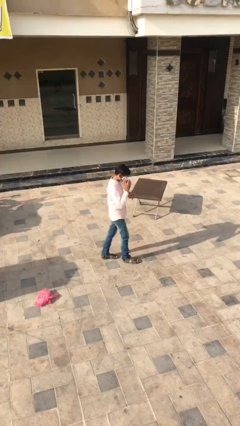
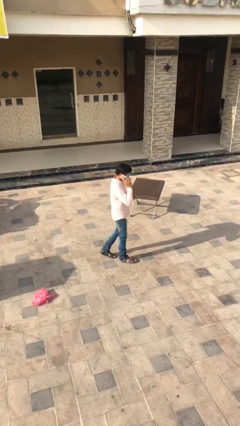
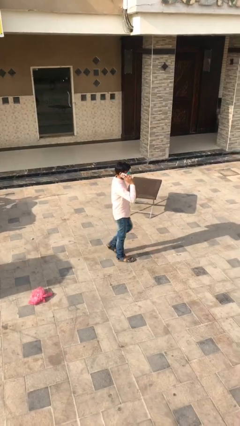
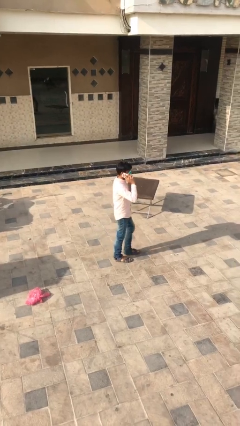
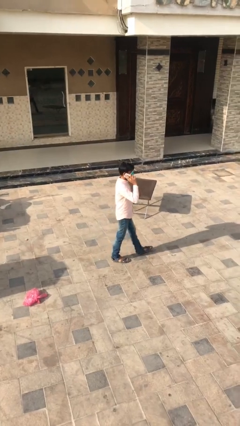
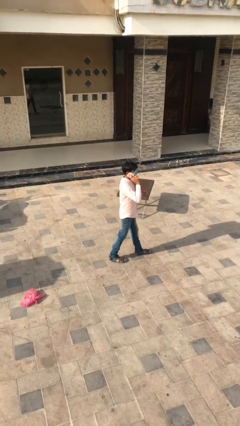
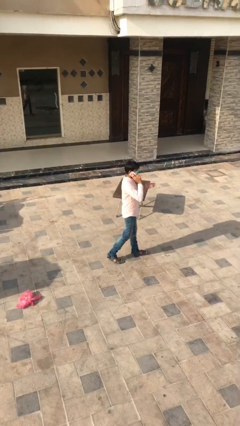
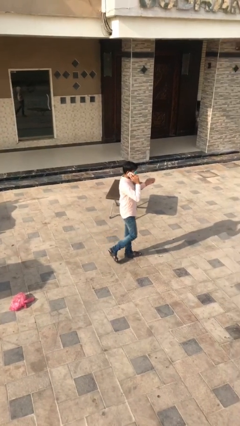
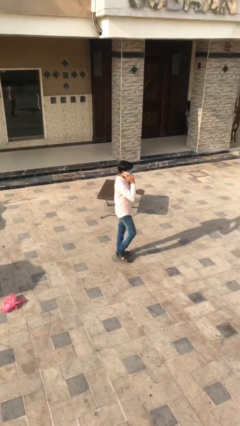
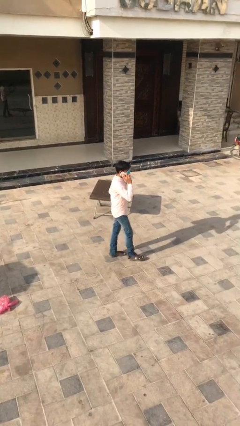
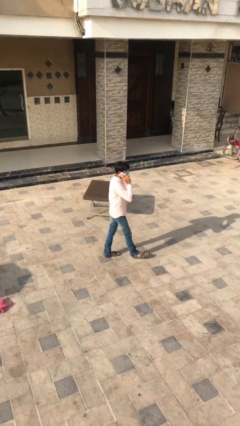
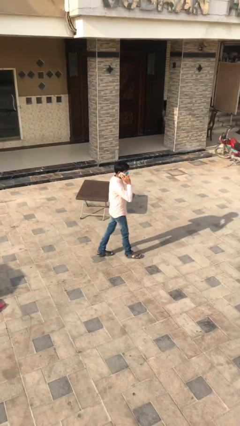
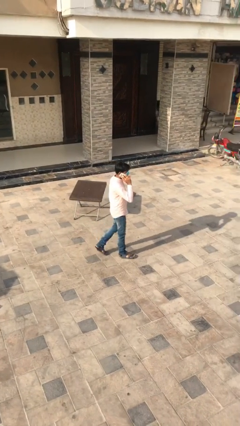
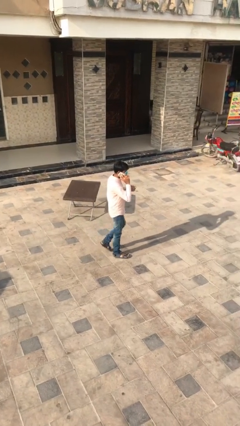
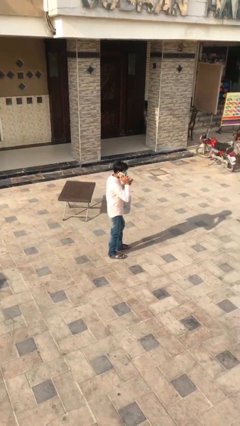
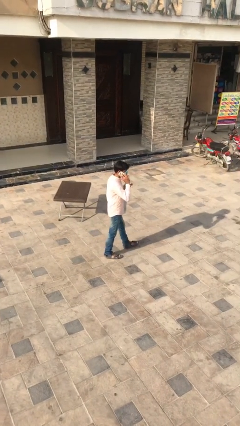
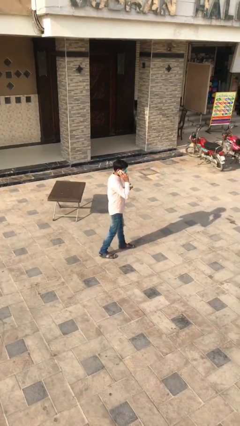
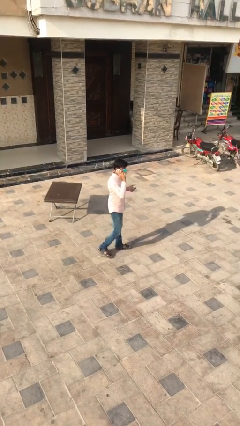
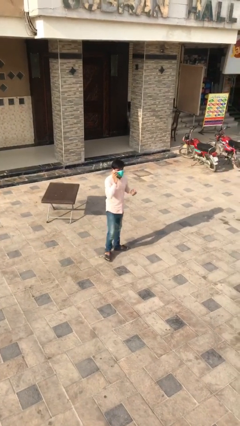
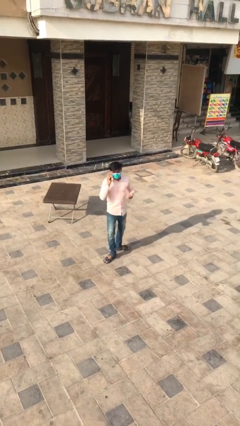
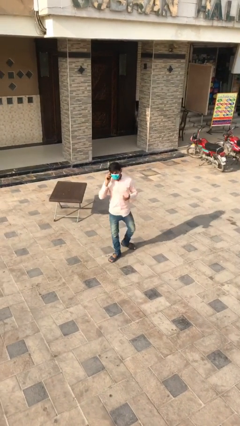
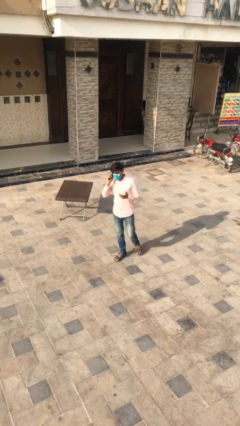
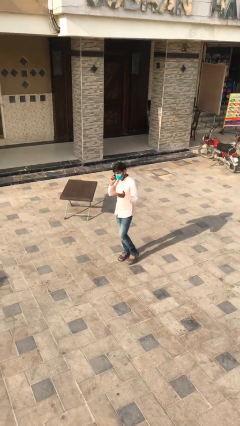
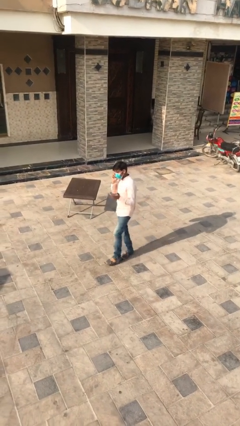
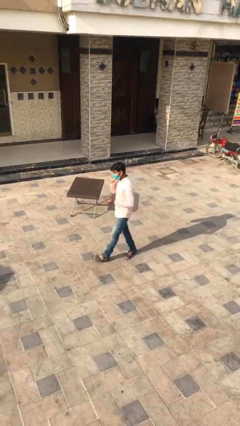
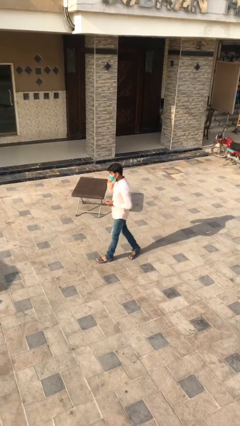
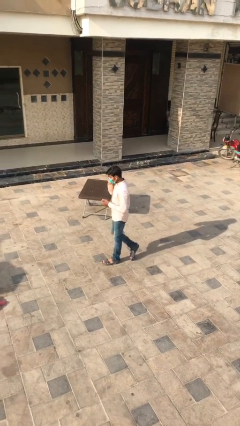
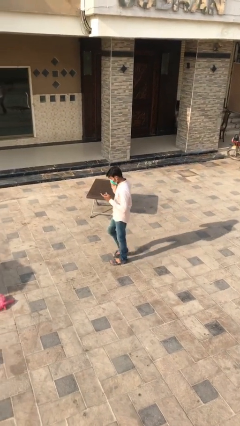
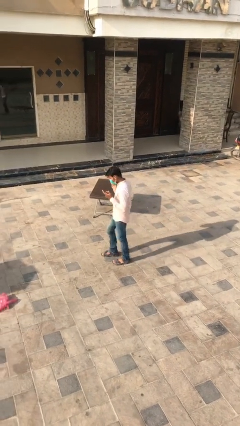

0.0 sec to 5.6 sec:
person talks on phone

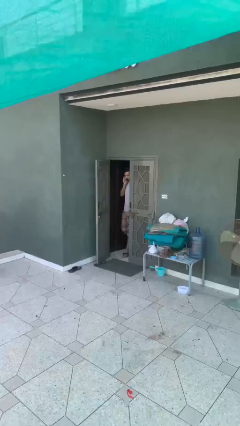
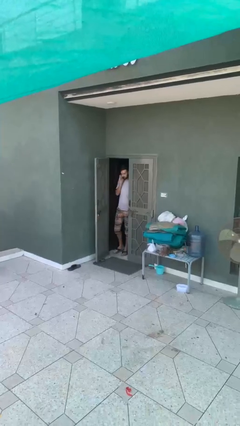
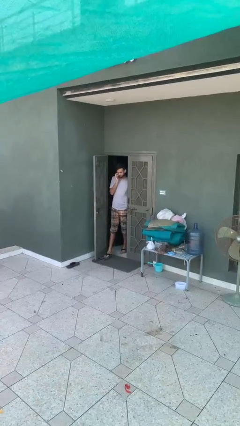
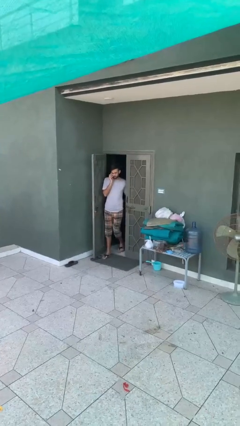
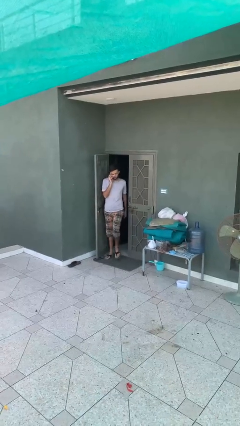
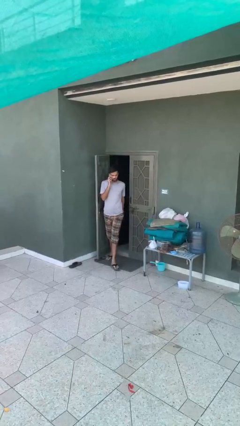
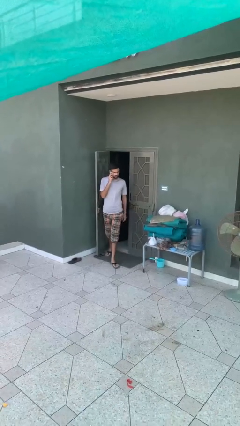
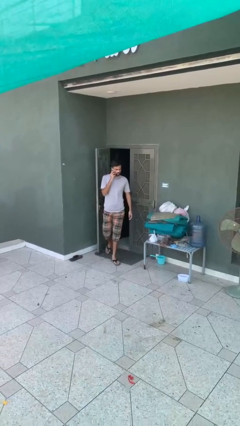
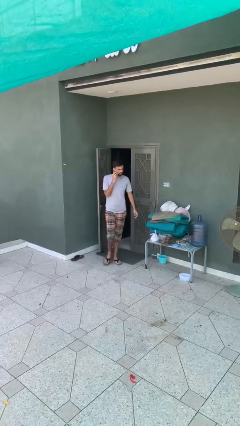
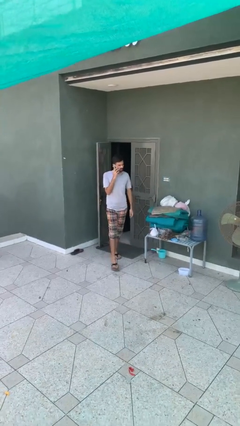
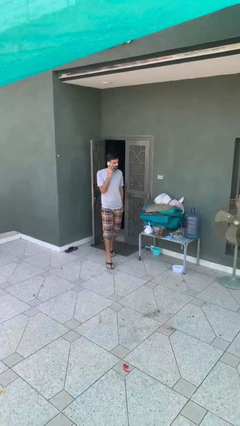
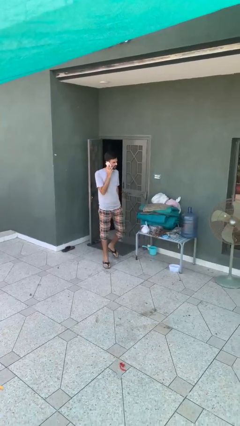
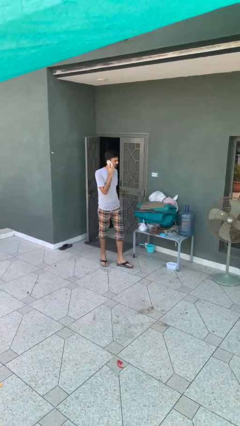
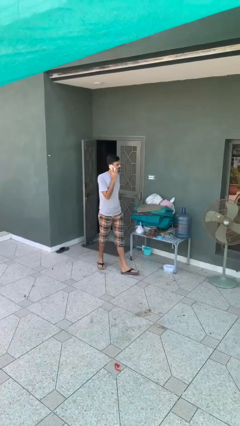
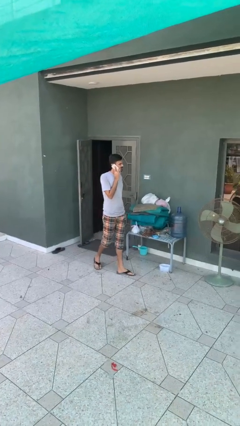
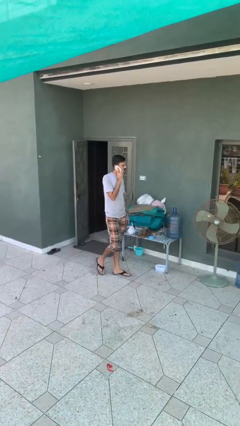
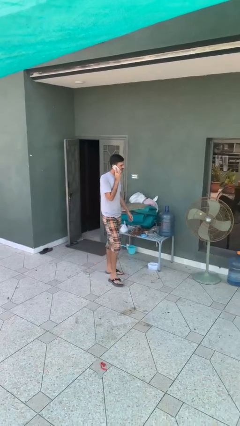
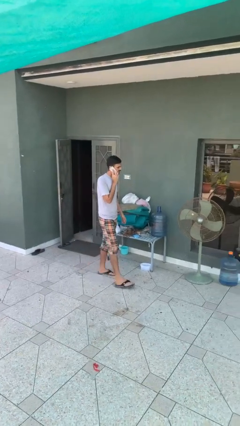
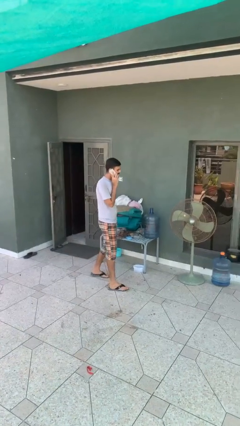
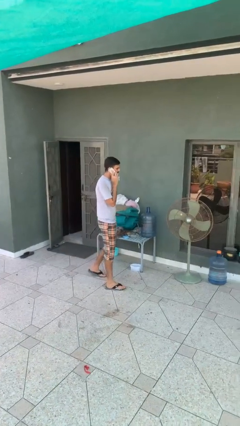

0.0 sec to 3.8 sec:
person enters scene through structure

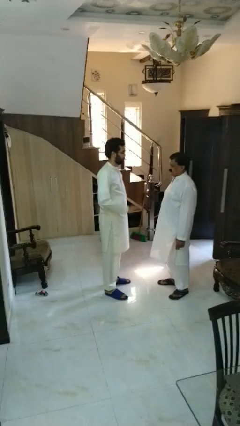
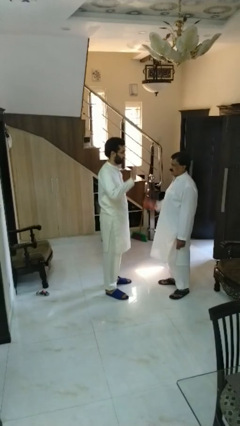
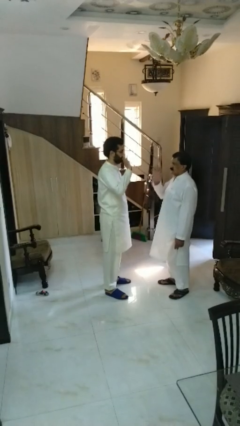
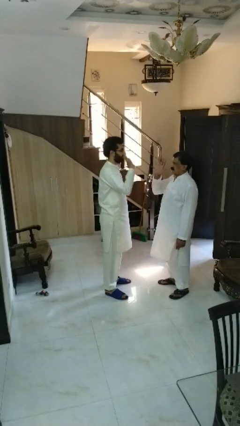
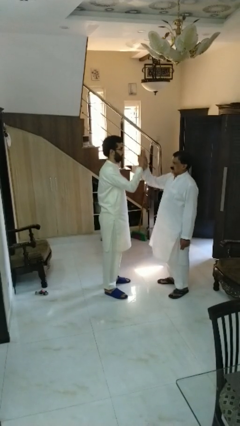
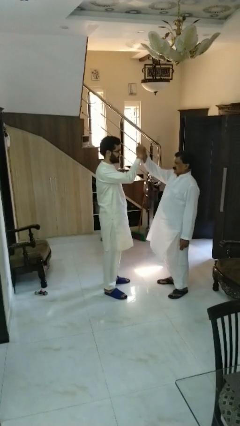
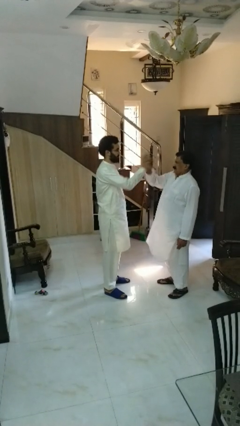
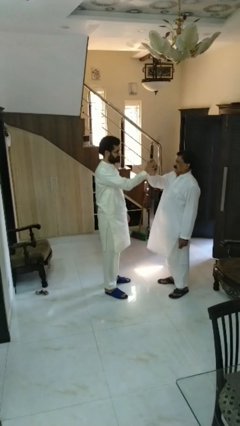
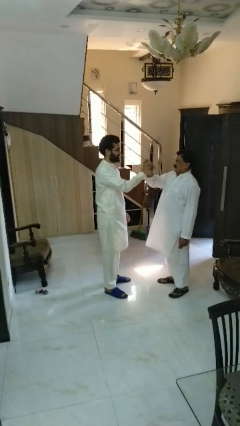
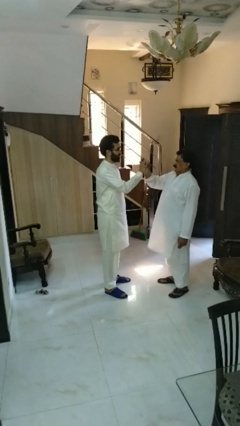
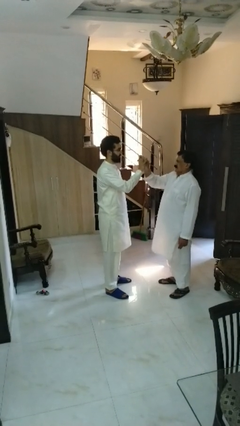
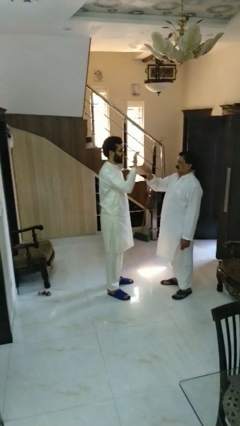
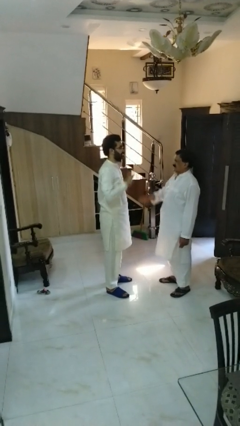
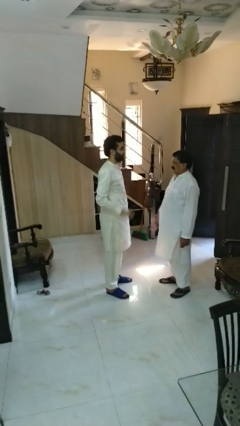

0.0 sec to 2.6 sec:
person highfives hand

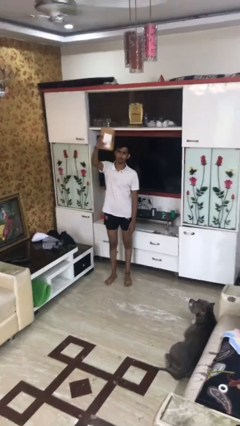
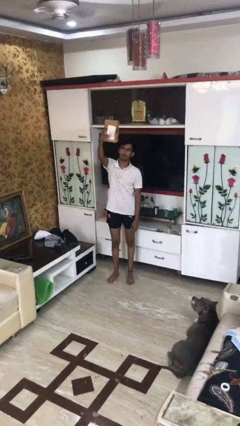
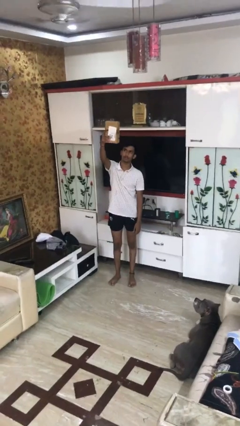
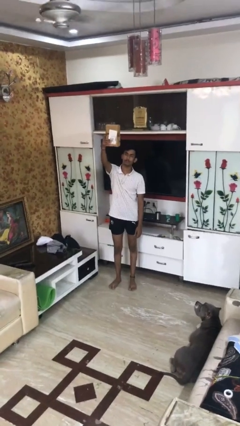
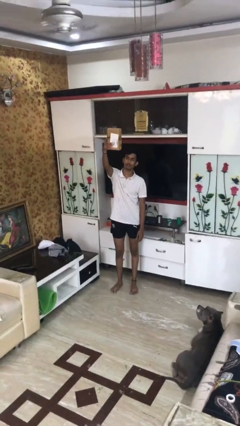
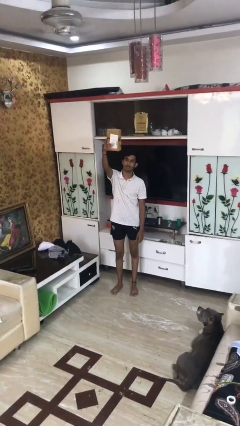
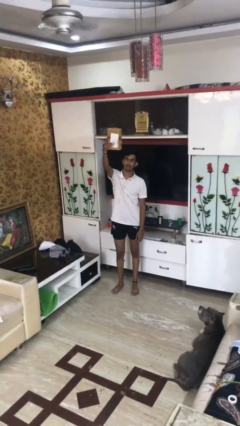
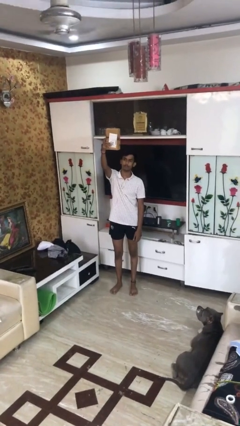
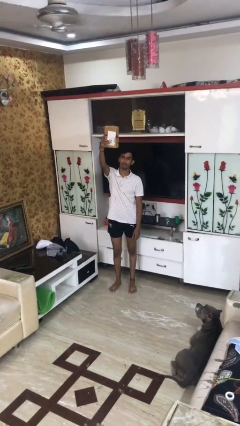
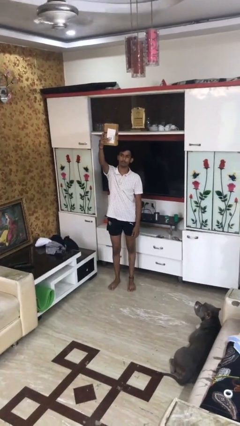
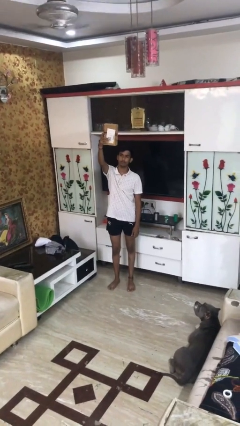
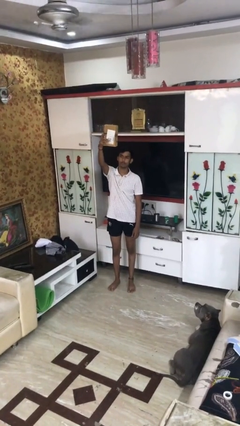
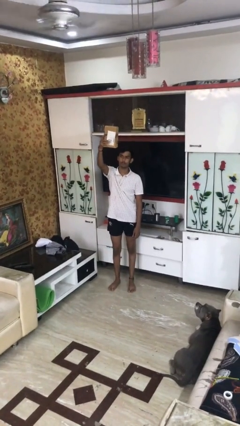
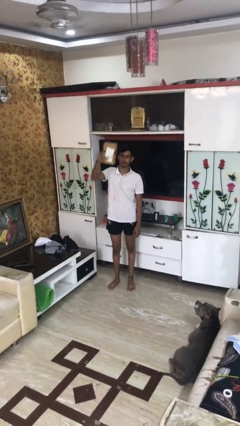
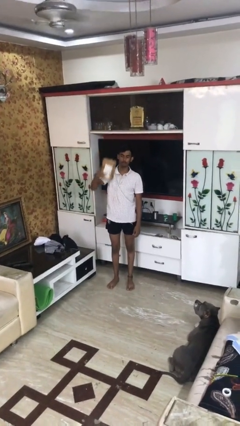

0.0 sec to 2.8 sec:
person holds object above head

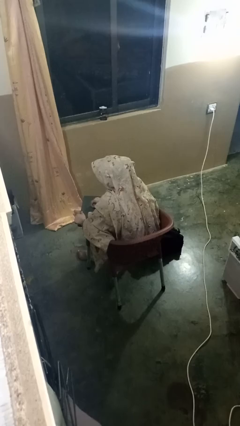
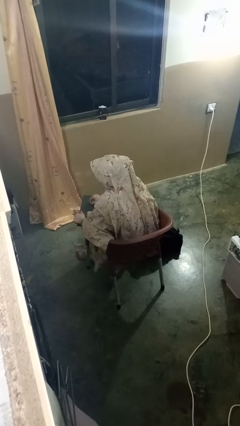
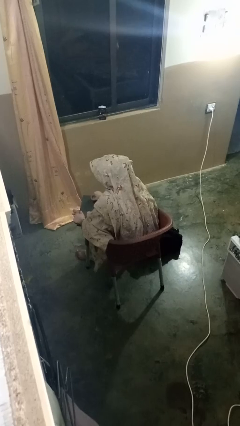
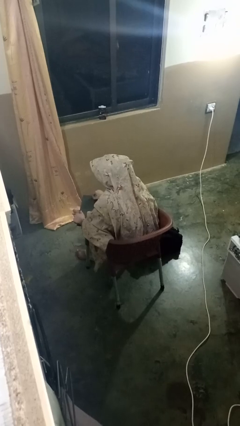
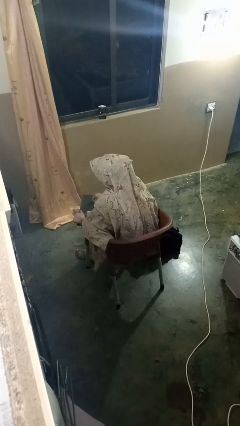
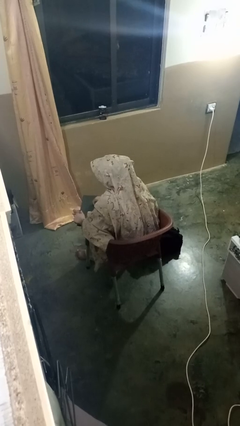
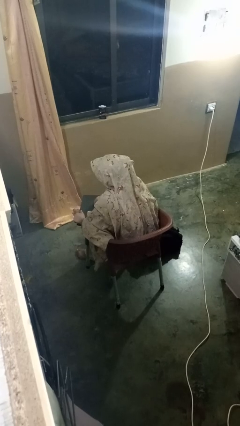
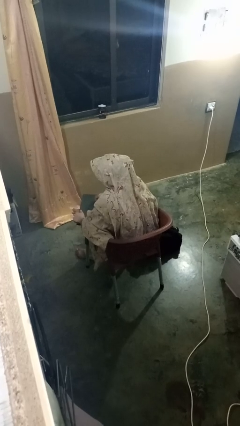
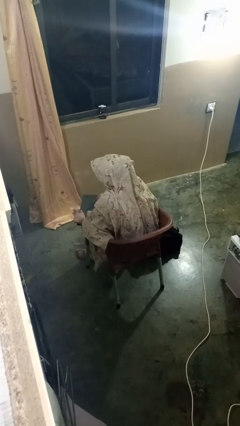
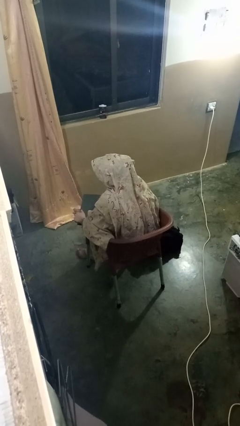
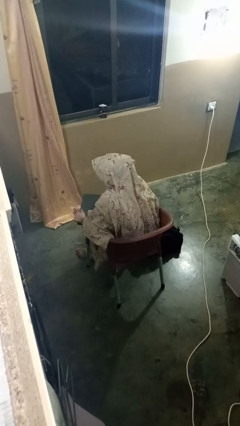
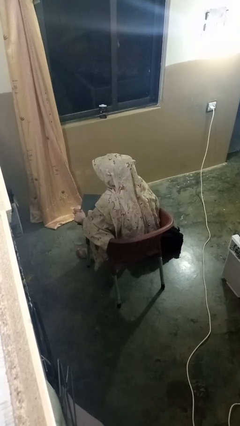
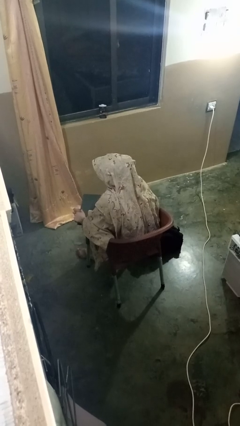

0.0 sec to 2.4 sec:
person interacts with tablet
